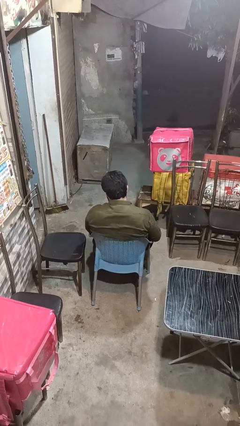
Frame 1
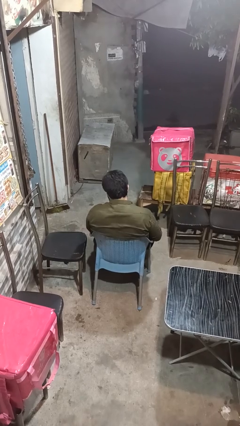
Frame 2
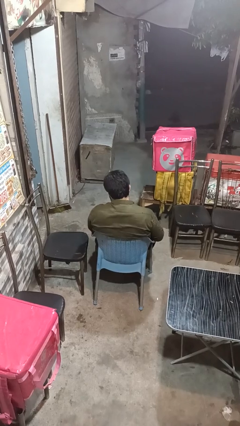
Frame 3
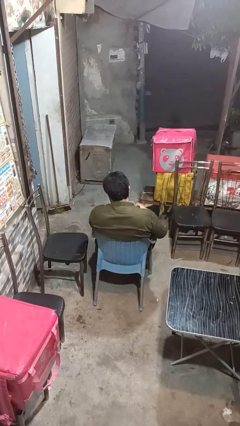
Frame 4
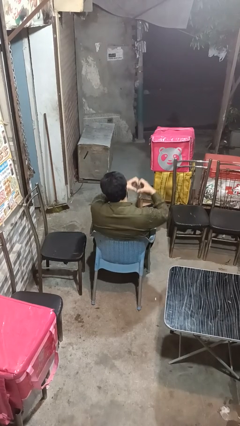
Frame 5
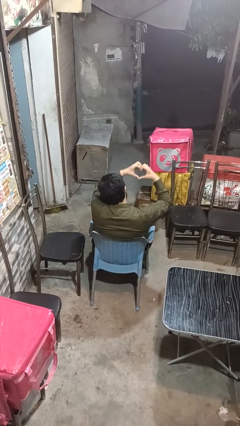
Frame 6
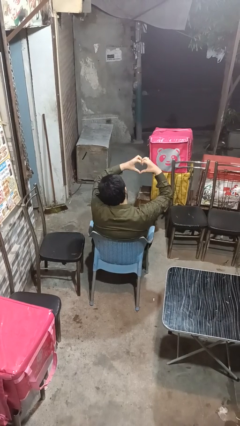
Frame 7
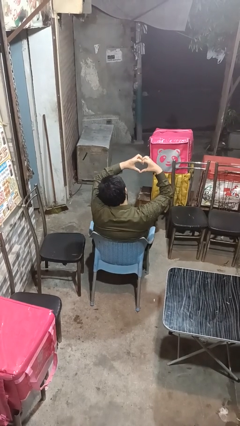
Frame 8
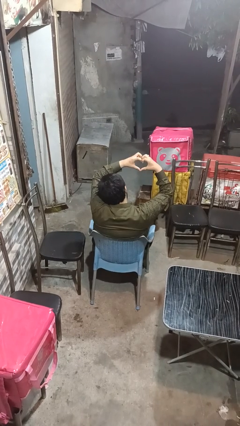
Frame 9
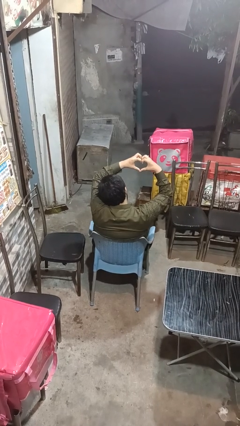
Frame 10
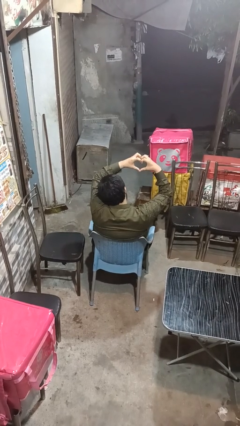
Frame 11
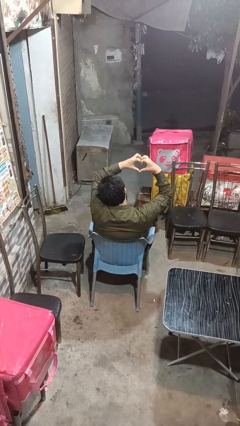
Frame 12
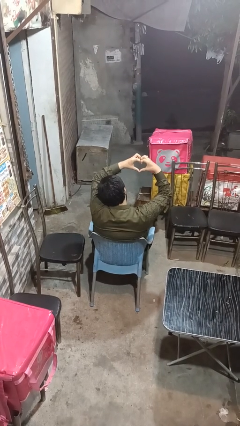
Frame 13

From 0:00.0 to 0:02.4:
person gestures heart

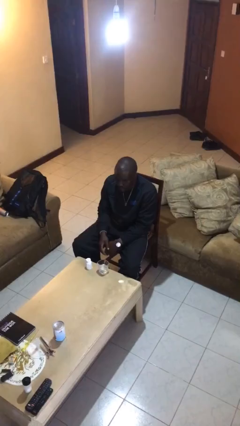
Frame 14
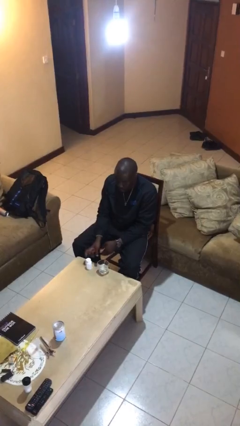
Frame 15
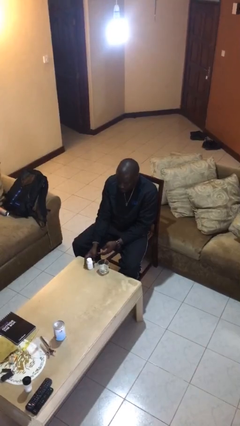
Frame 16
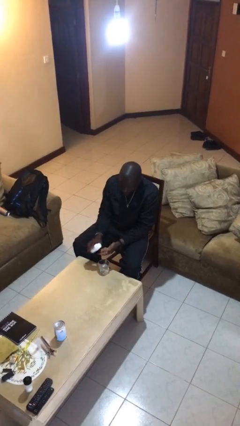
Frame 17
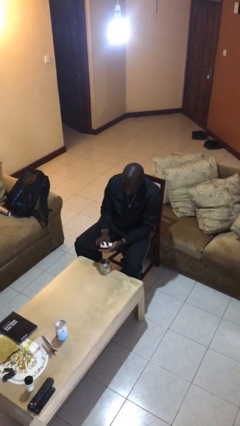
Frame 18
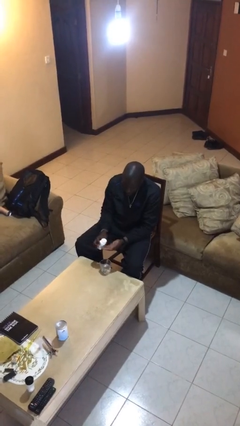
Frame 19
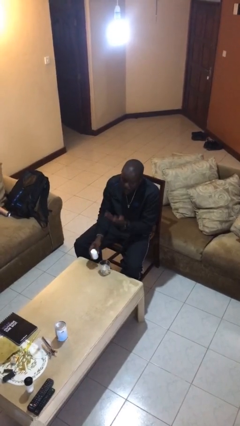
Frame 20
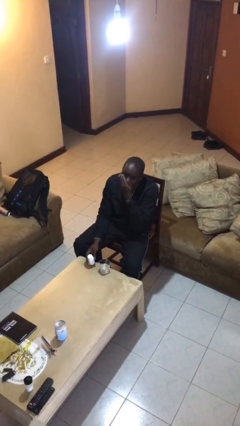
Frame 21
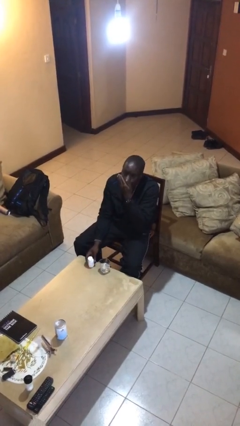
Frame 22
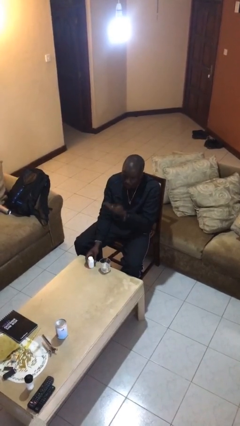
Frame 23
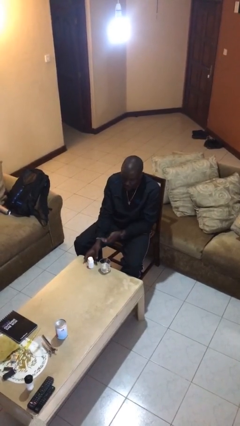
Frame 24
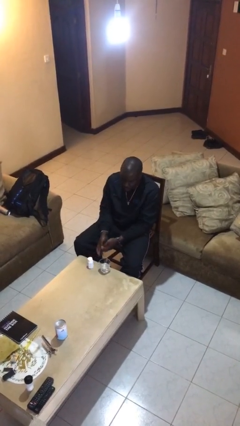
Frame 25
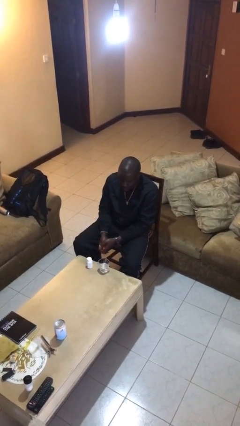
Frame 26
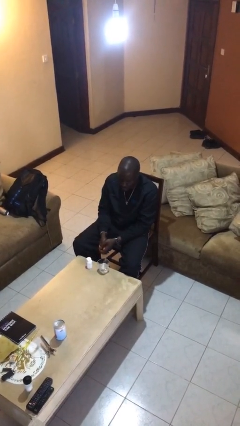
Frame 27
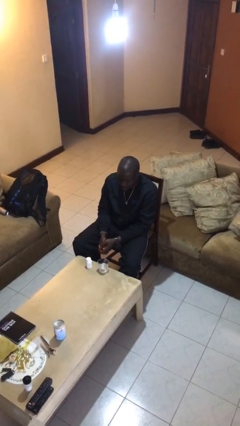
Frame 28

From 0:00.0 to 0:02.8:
person takes medicine pills

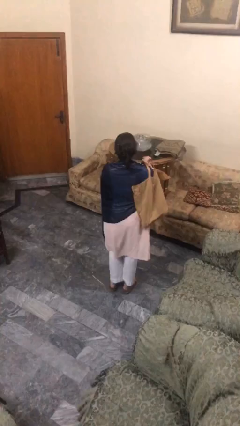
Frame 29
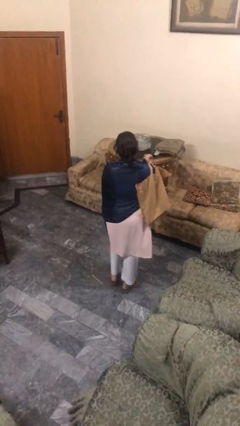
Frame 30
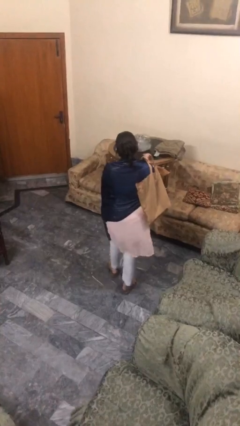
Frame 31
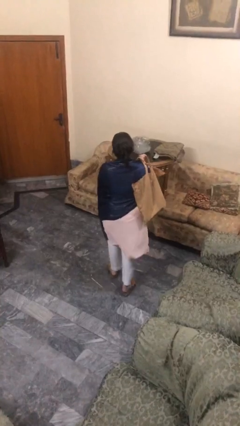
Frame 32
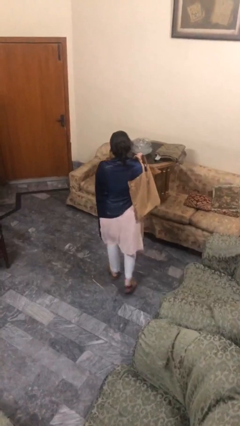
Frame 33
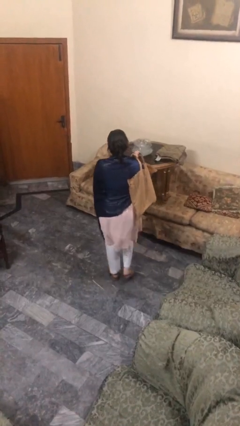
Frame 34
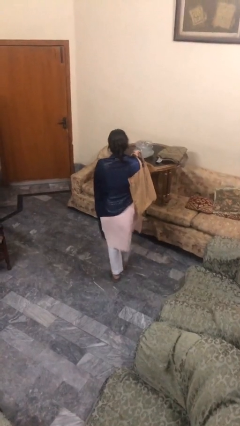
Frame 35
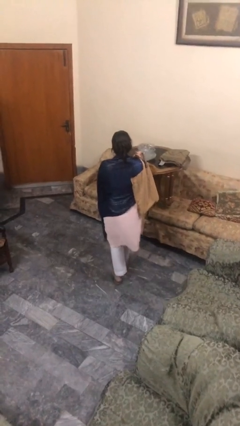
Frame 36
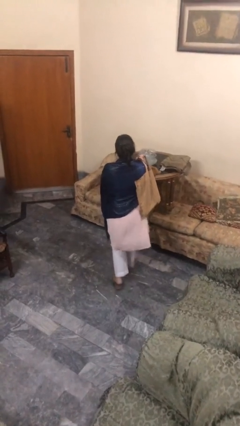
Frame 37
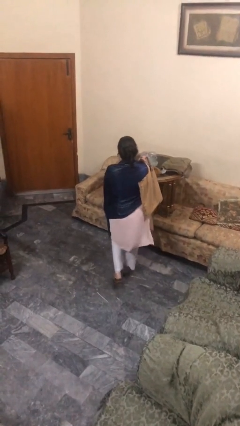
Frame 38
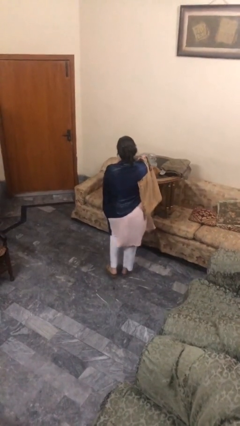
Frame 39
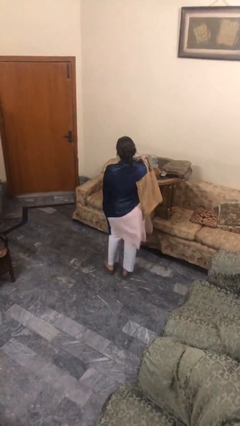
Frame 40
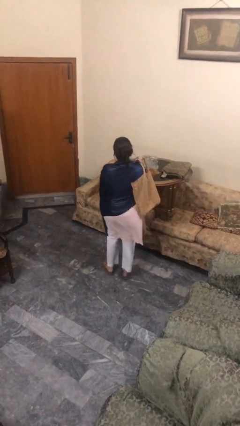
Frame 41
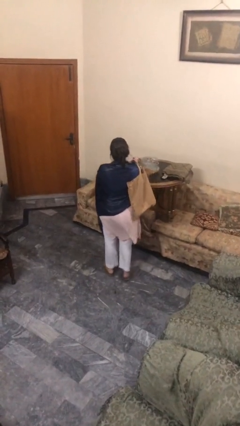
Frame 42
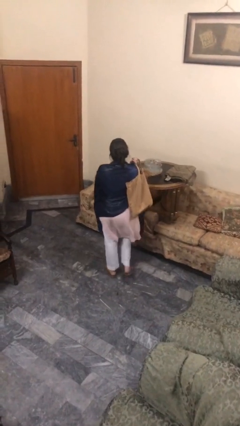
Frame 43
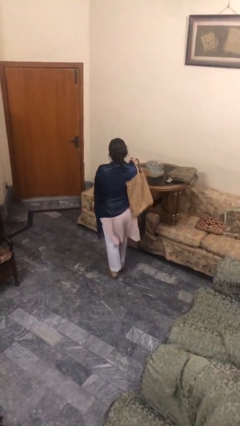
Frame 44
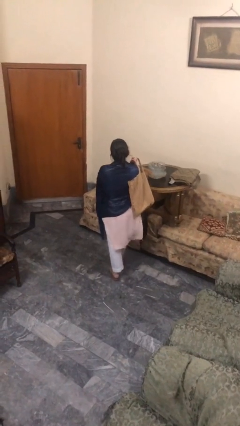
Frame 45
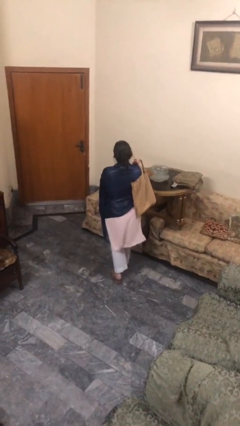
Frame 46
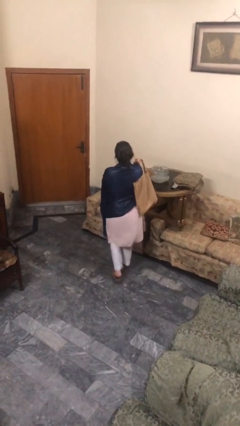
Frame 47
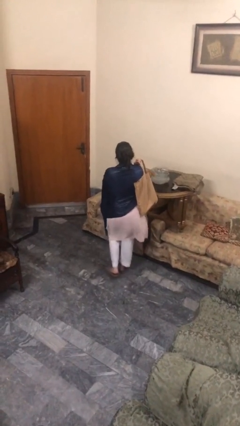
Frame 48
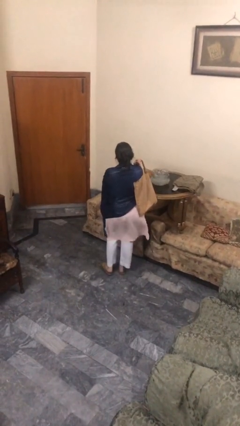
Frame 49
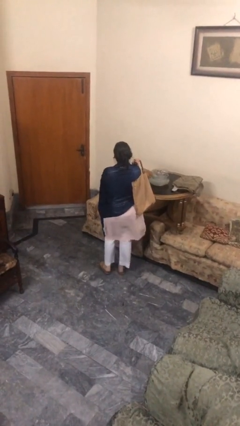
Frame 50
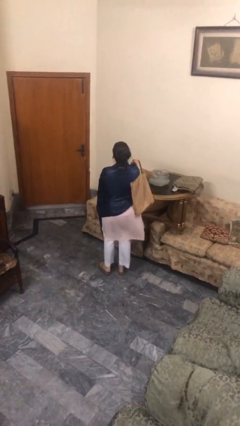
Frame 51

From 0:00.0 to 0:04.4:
person carries groceries

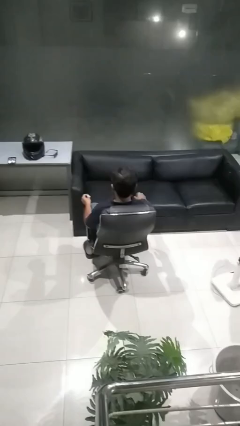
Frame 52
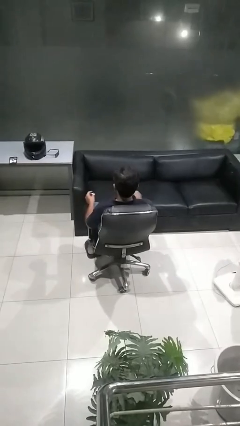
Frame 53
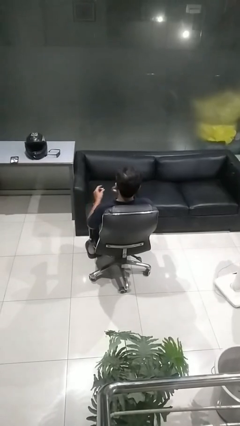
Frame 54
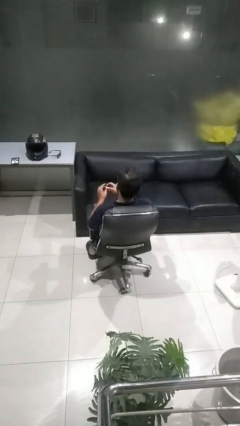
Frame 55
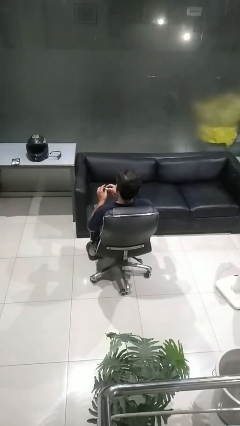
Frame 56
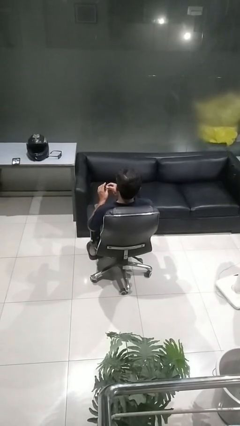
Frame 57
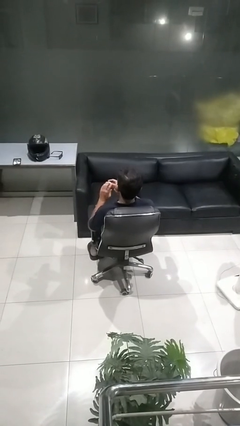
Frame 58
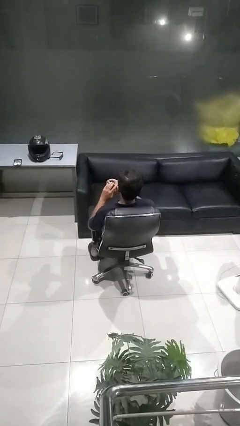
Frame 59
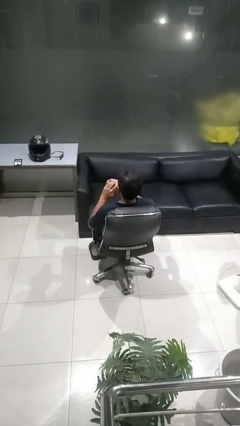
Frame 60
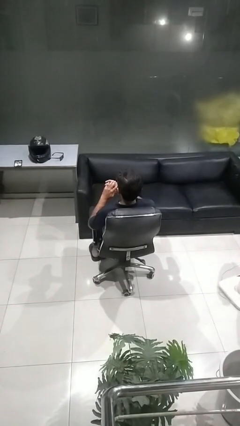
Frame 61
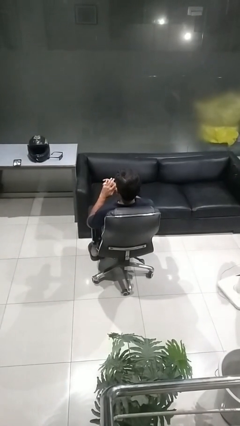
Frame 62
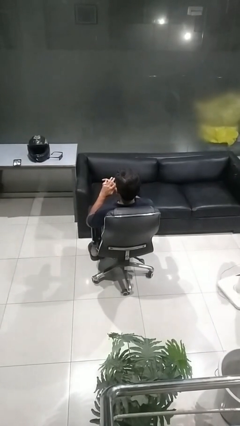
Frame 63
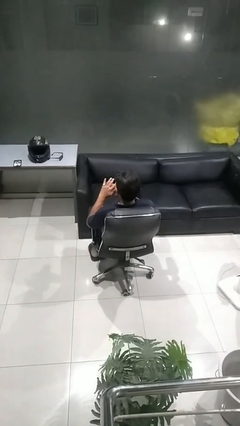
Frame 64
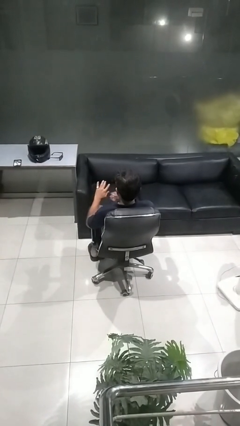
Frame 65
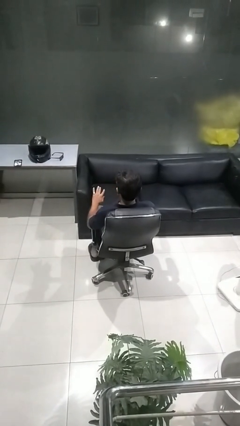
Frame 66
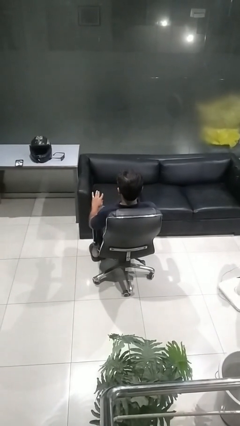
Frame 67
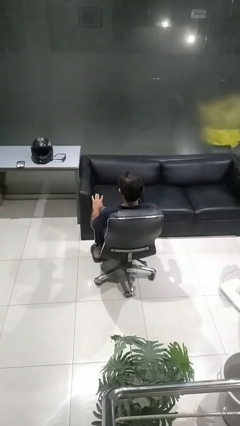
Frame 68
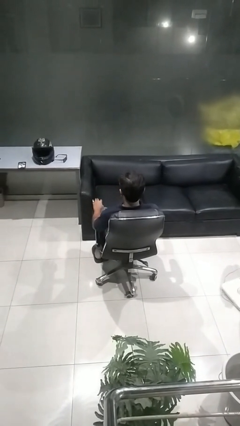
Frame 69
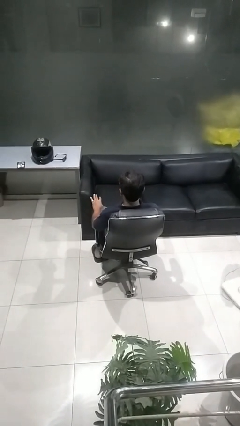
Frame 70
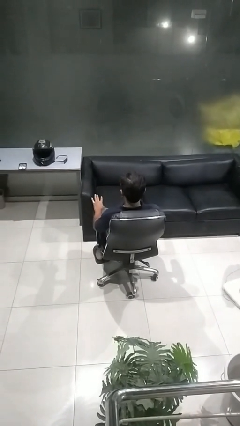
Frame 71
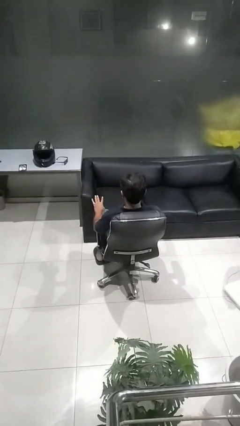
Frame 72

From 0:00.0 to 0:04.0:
person puts on ring

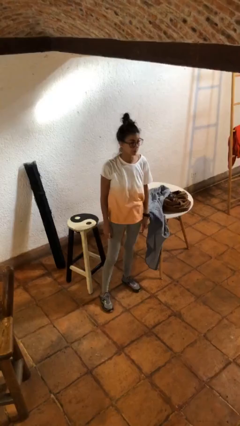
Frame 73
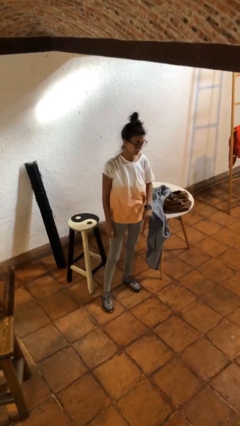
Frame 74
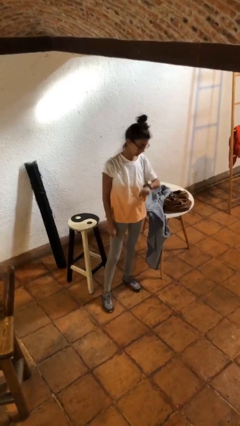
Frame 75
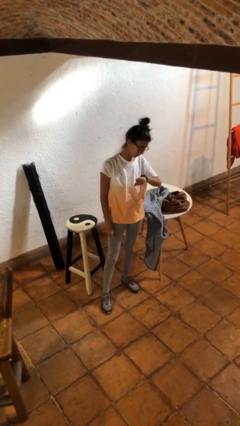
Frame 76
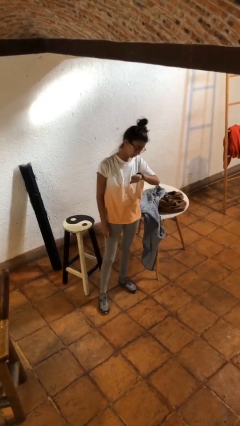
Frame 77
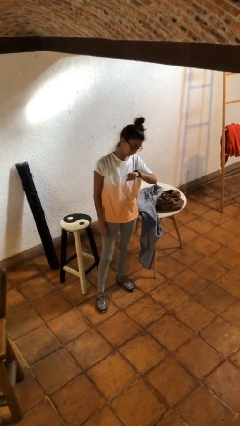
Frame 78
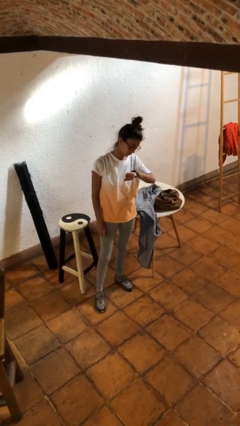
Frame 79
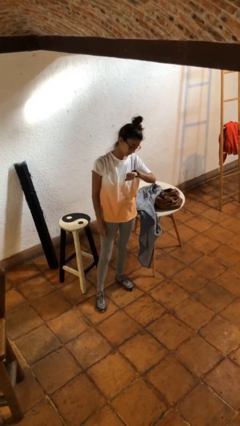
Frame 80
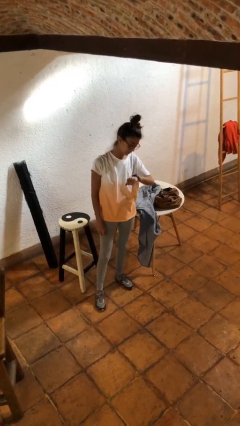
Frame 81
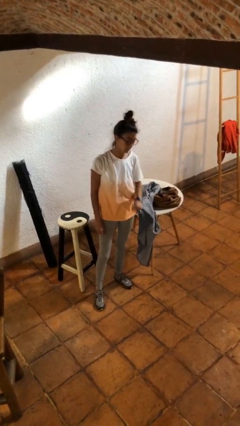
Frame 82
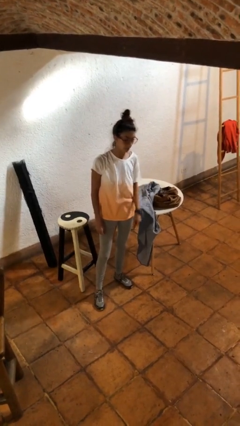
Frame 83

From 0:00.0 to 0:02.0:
person looks at wristwatch

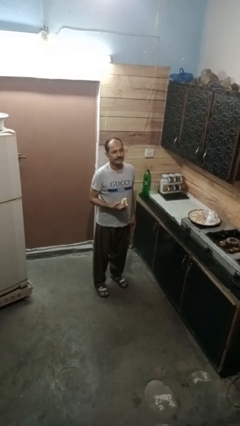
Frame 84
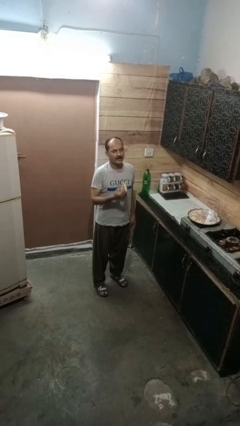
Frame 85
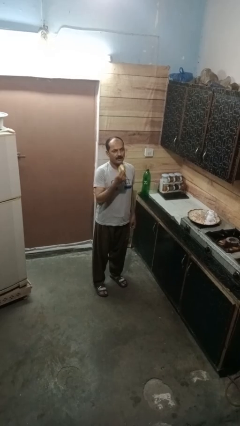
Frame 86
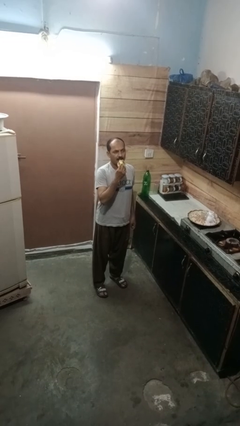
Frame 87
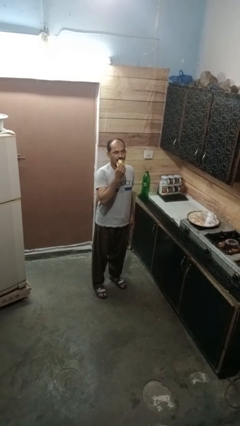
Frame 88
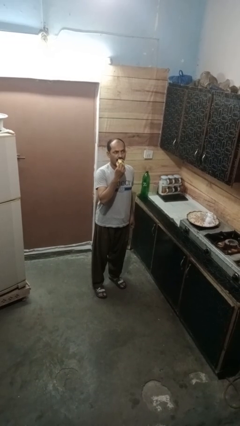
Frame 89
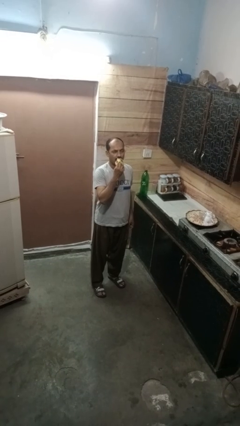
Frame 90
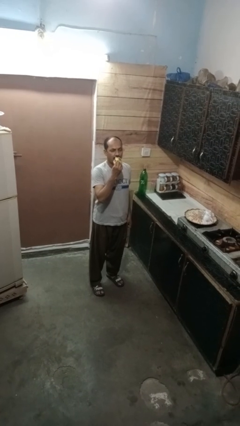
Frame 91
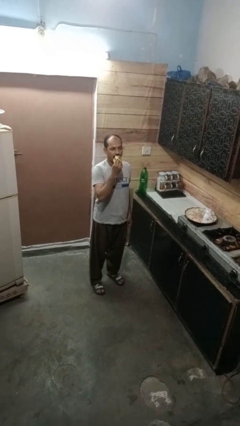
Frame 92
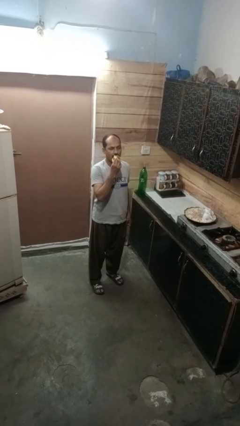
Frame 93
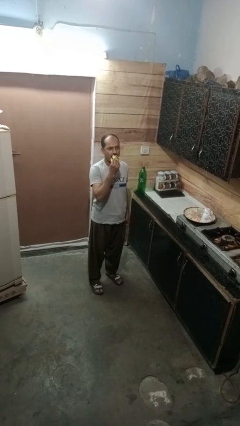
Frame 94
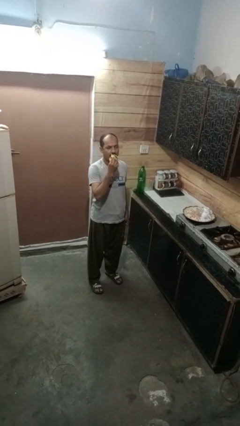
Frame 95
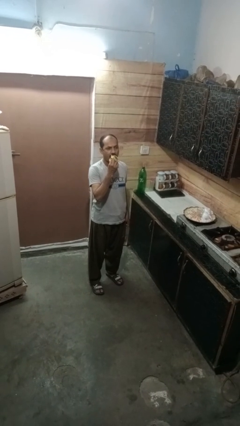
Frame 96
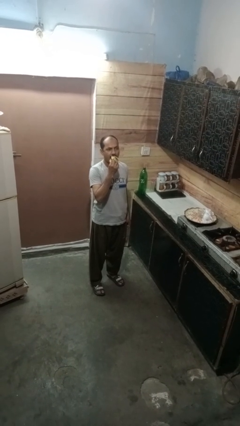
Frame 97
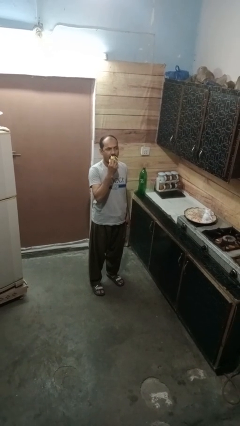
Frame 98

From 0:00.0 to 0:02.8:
person eats banana
